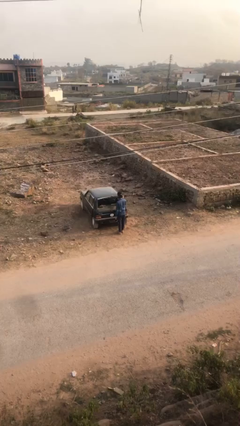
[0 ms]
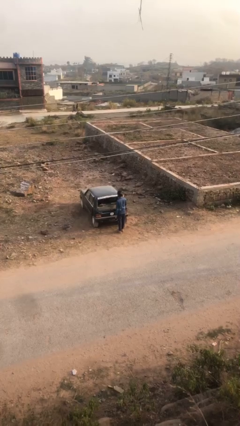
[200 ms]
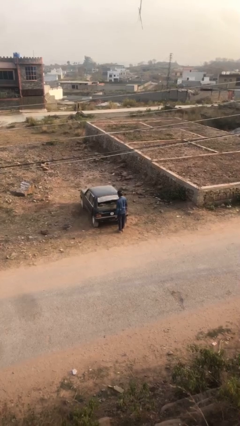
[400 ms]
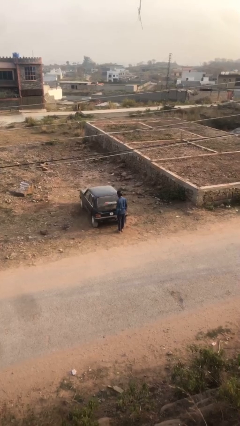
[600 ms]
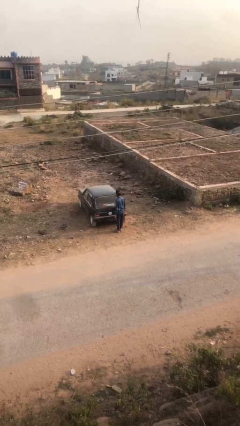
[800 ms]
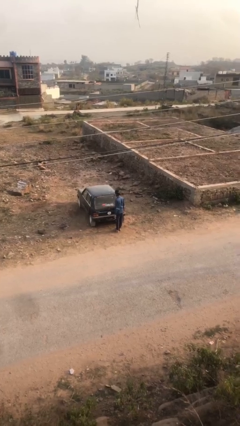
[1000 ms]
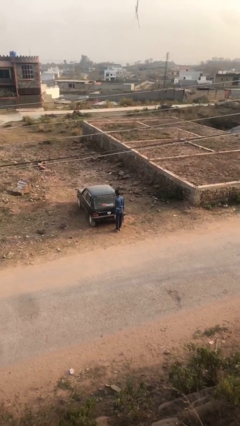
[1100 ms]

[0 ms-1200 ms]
person closes car trunk

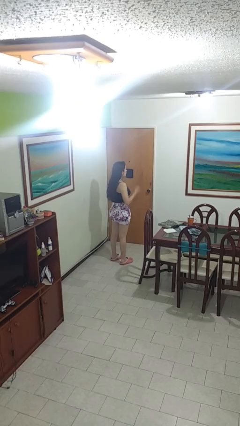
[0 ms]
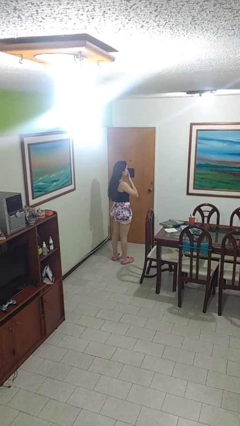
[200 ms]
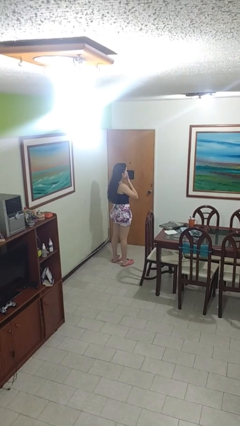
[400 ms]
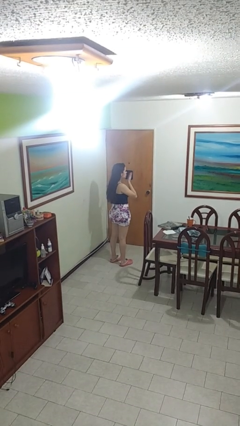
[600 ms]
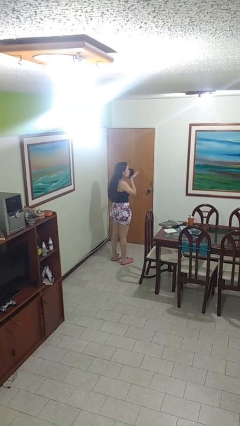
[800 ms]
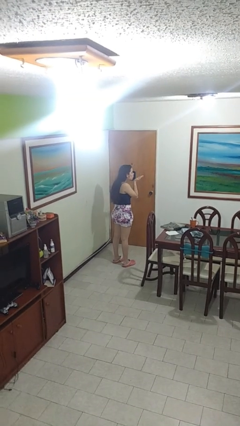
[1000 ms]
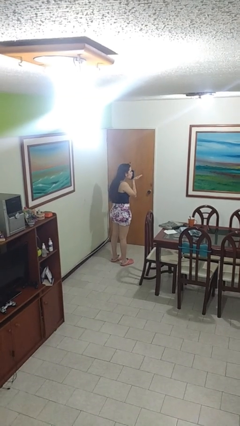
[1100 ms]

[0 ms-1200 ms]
person gestures blow kiss

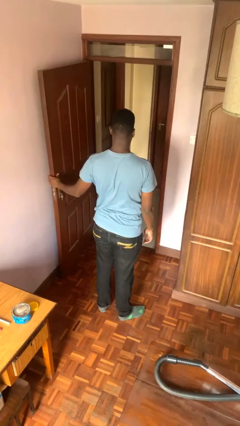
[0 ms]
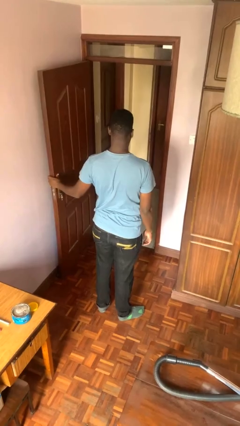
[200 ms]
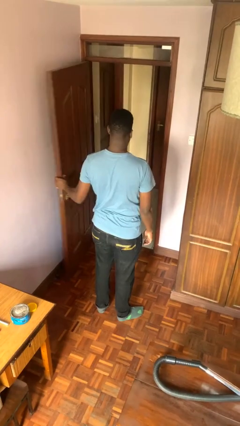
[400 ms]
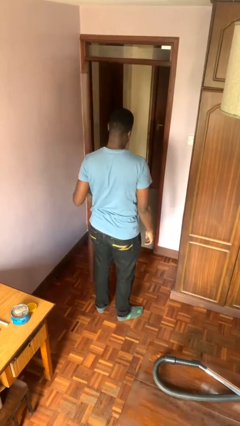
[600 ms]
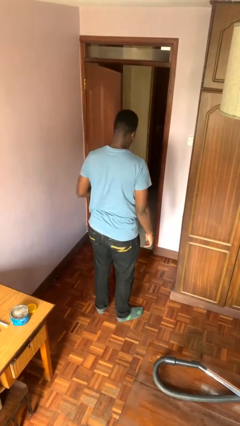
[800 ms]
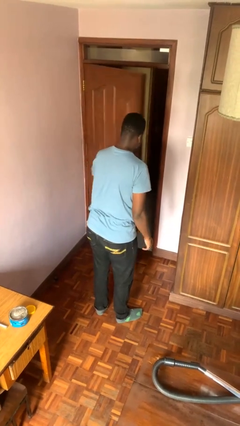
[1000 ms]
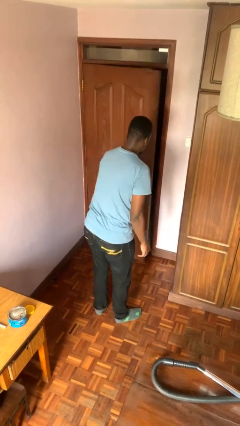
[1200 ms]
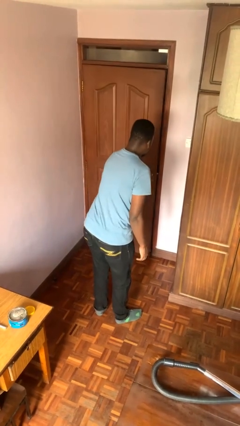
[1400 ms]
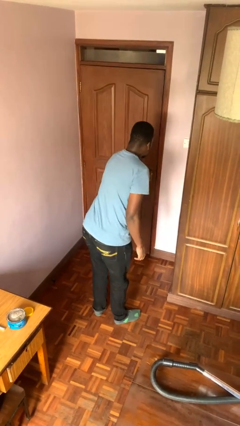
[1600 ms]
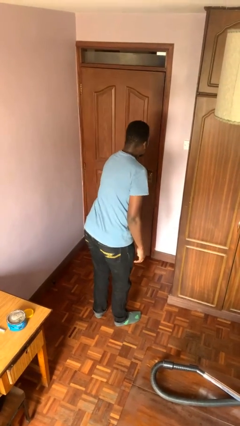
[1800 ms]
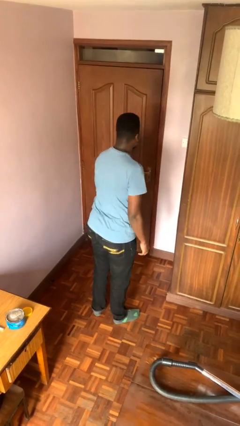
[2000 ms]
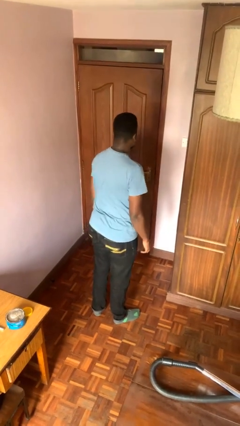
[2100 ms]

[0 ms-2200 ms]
person closes facility door

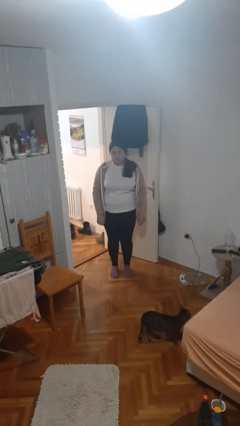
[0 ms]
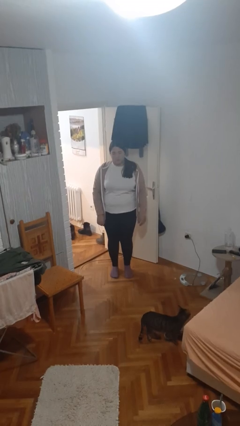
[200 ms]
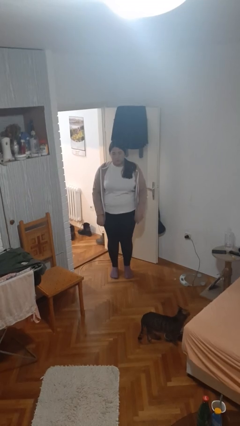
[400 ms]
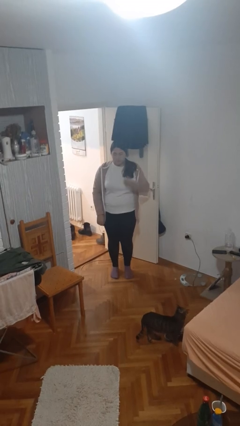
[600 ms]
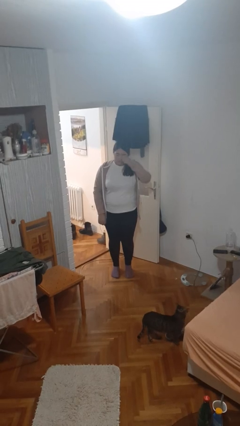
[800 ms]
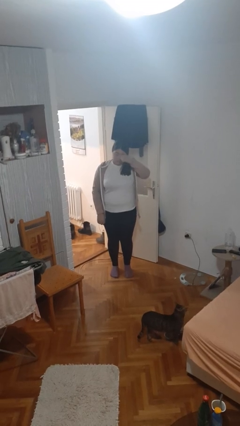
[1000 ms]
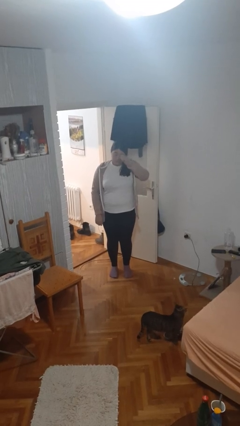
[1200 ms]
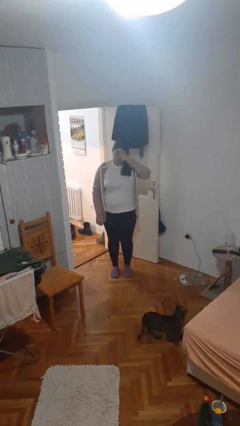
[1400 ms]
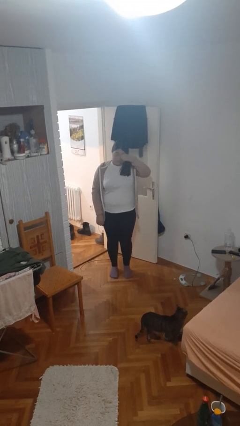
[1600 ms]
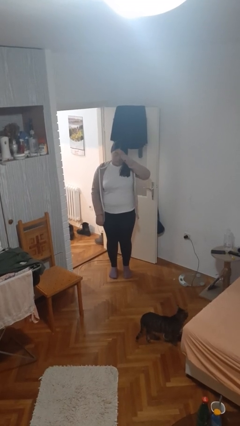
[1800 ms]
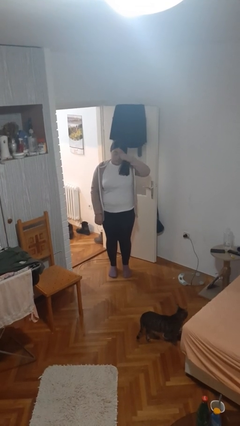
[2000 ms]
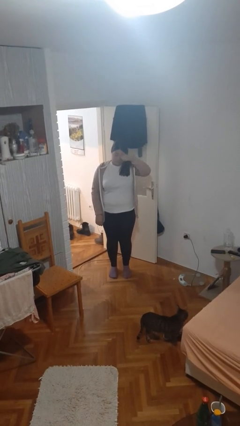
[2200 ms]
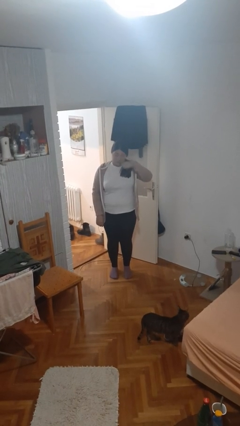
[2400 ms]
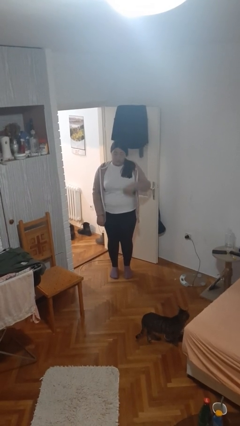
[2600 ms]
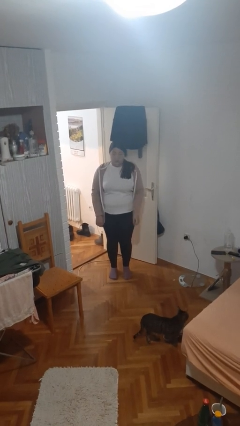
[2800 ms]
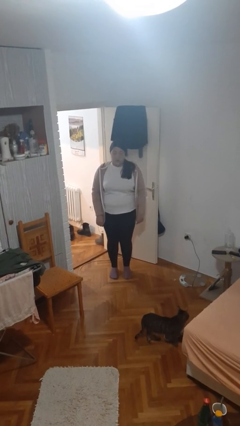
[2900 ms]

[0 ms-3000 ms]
person rubs eyes

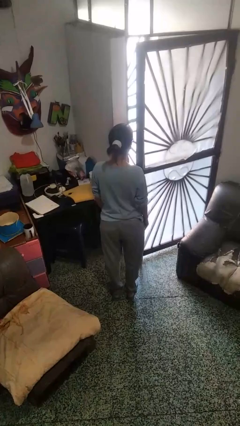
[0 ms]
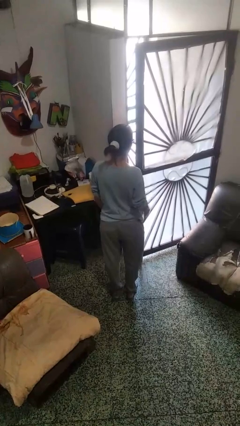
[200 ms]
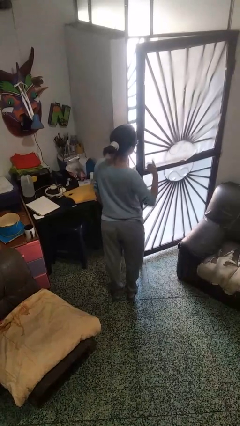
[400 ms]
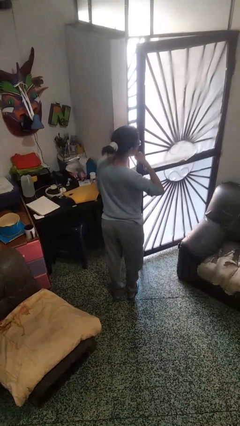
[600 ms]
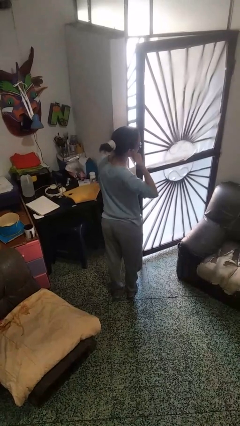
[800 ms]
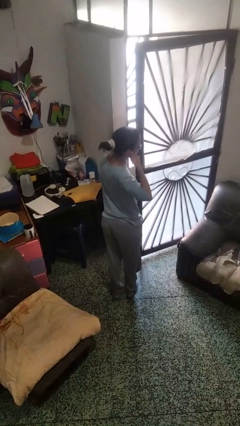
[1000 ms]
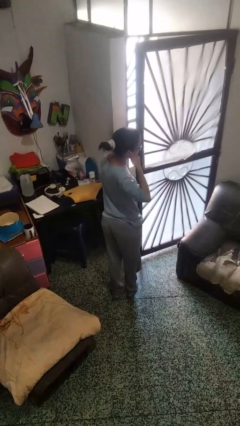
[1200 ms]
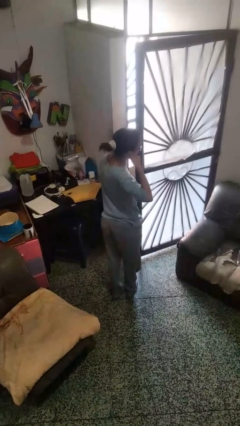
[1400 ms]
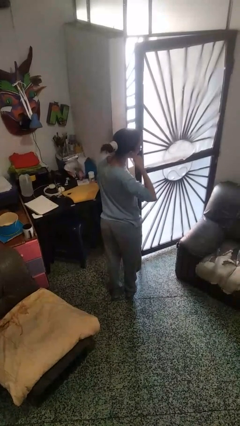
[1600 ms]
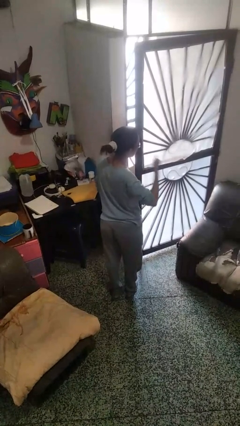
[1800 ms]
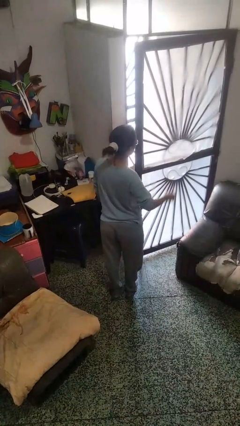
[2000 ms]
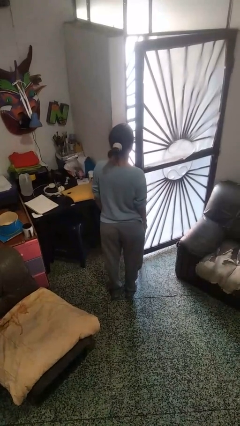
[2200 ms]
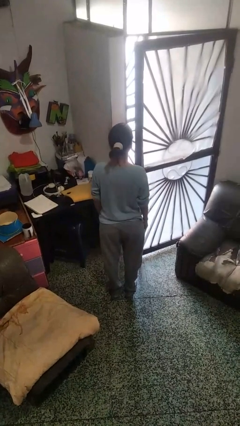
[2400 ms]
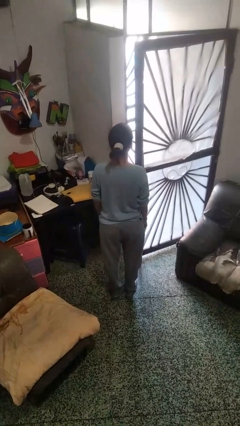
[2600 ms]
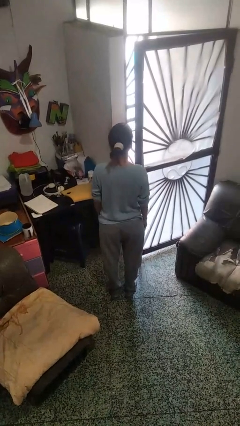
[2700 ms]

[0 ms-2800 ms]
person gestures call me

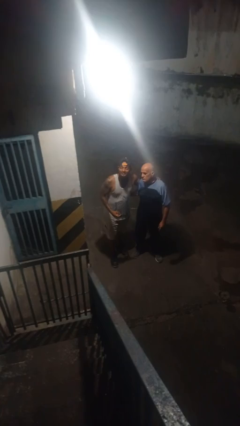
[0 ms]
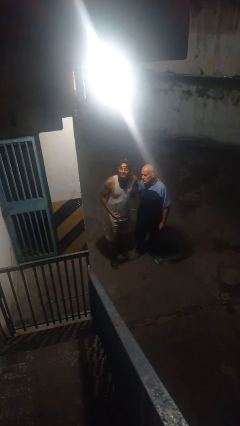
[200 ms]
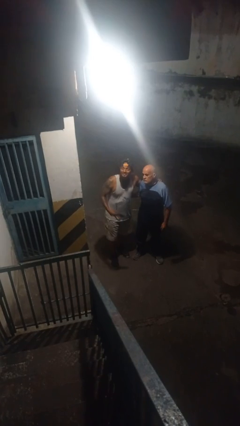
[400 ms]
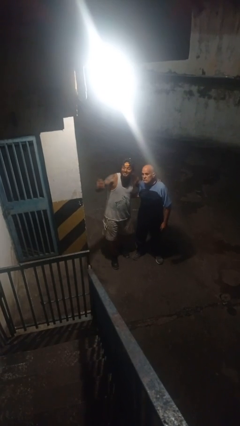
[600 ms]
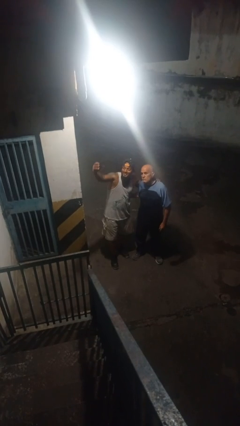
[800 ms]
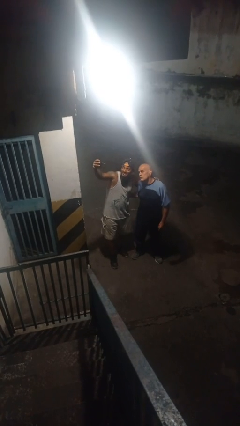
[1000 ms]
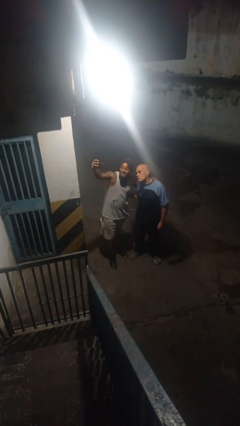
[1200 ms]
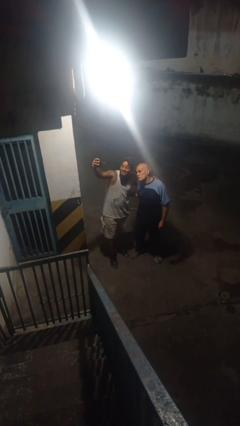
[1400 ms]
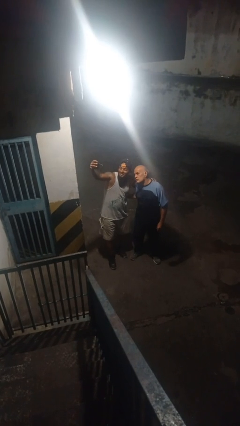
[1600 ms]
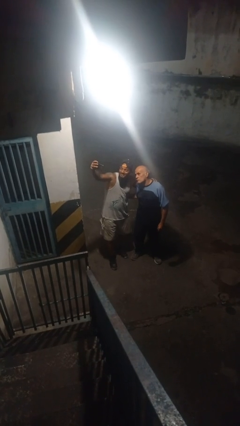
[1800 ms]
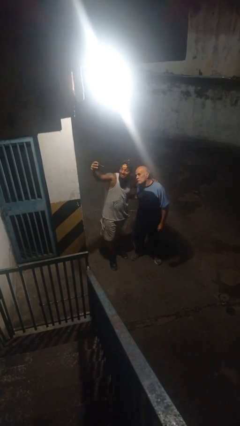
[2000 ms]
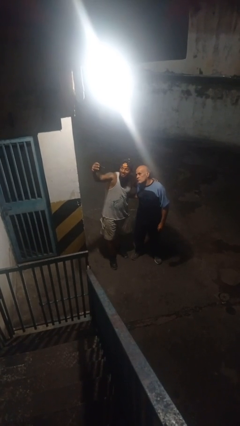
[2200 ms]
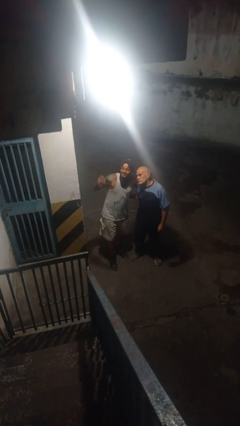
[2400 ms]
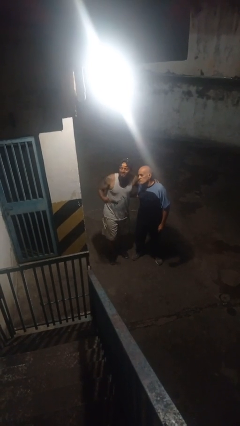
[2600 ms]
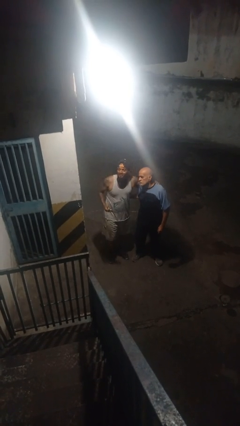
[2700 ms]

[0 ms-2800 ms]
person takes selfie with person

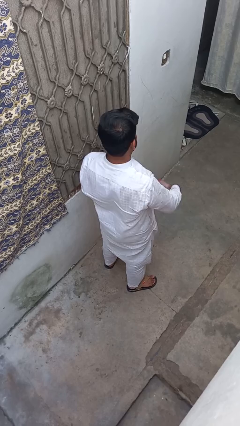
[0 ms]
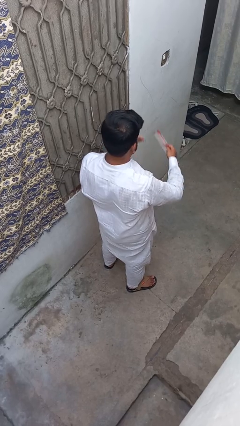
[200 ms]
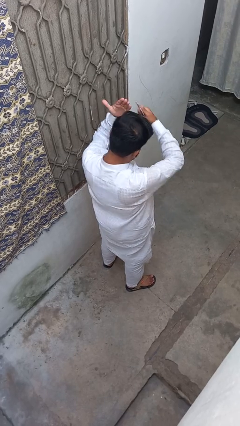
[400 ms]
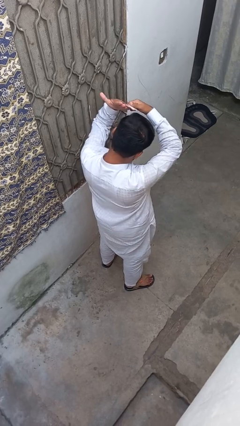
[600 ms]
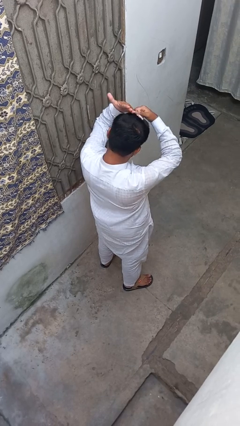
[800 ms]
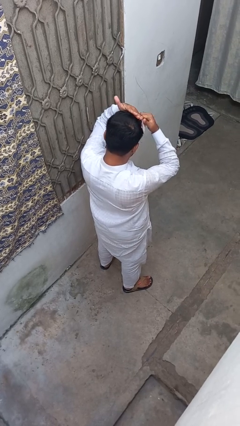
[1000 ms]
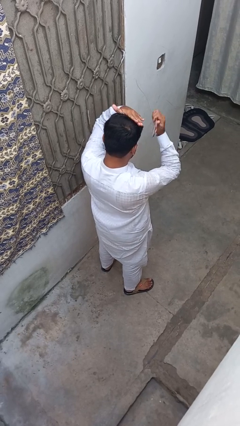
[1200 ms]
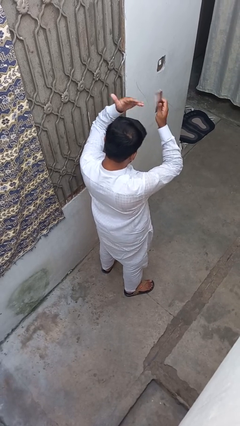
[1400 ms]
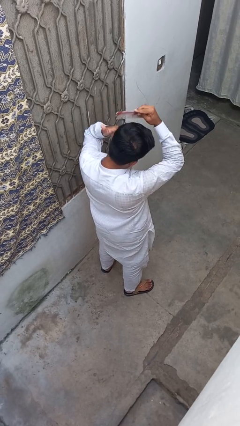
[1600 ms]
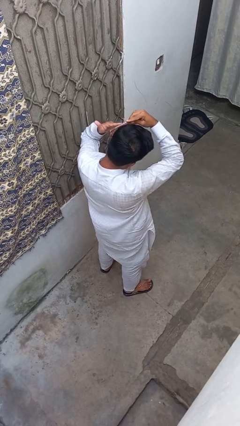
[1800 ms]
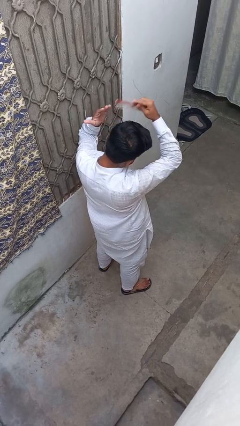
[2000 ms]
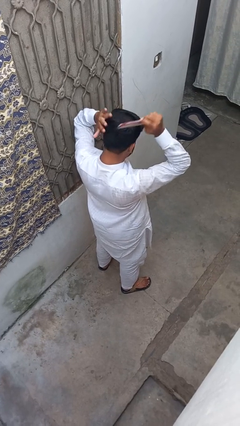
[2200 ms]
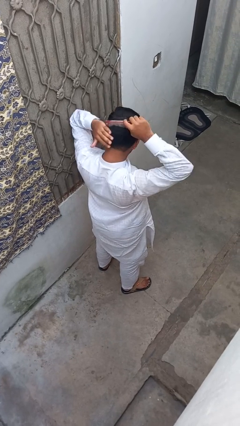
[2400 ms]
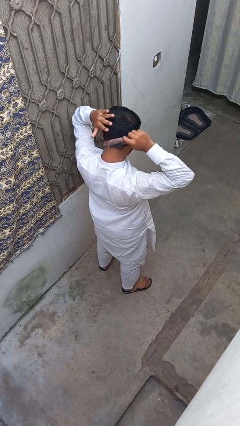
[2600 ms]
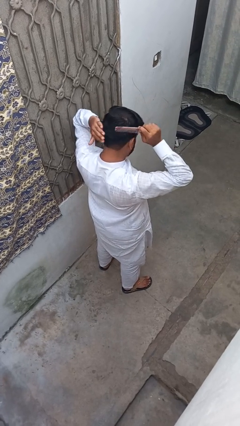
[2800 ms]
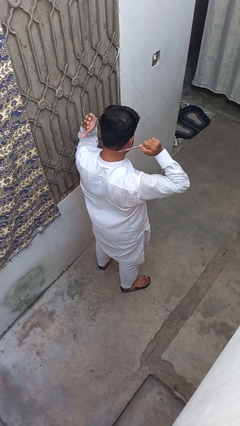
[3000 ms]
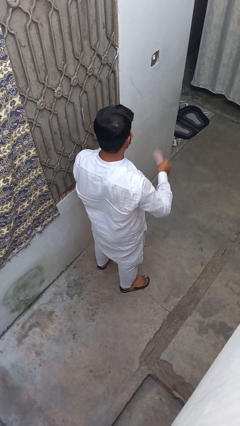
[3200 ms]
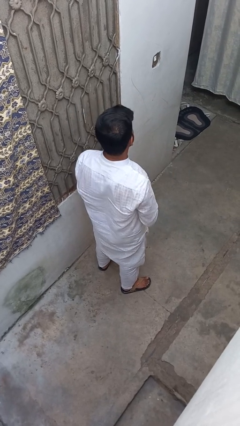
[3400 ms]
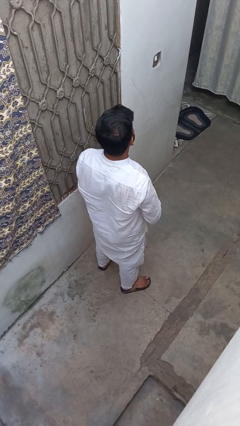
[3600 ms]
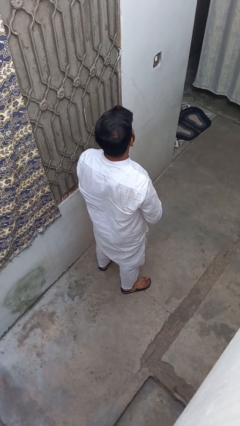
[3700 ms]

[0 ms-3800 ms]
person brushes hair
